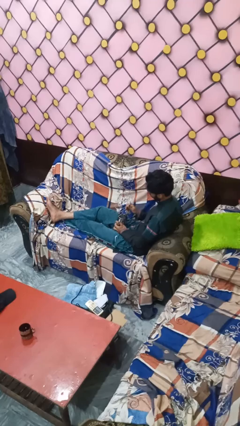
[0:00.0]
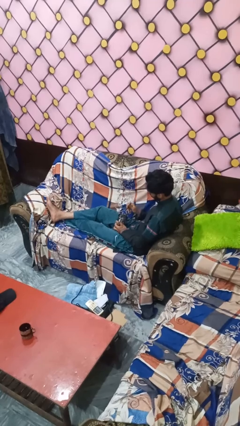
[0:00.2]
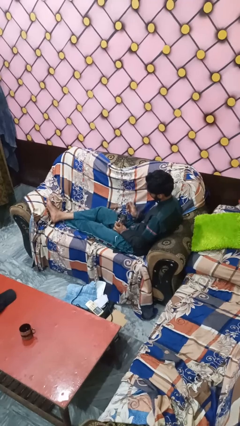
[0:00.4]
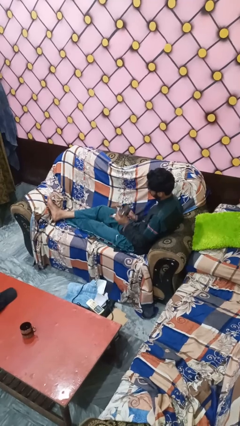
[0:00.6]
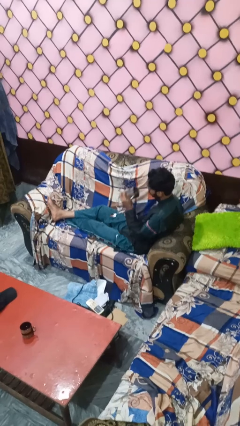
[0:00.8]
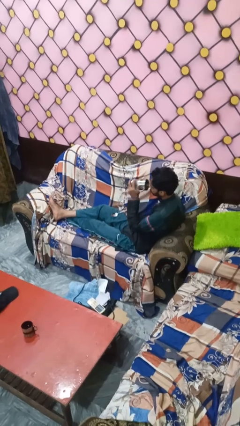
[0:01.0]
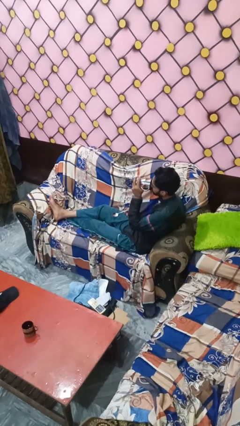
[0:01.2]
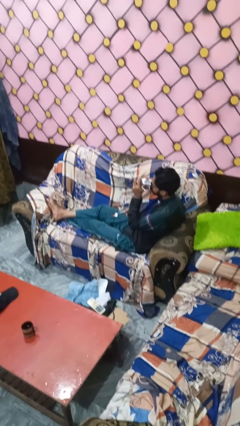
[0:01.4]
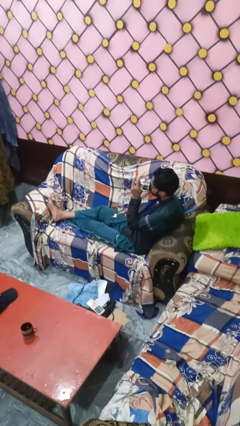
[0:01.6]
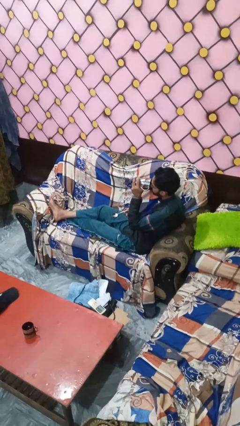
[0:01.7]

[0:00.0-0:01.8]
person drinks from mug

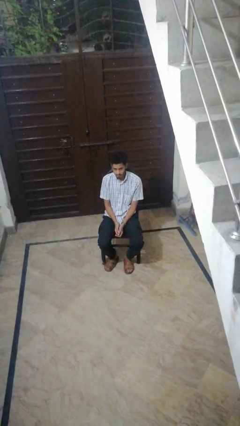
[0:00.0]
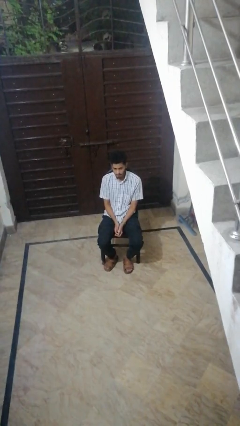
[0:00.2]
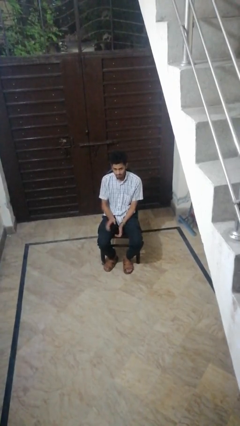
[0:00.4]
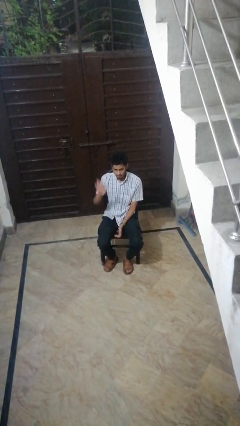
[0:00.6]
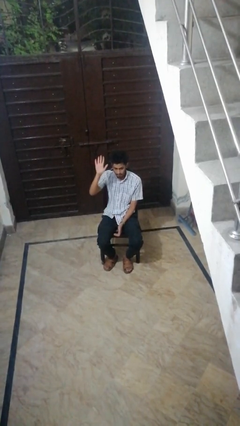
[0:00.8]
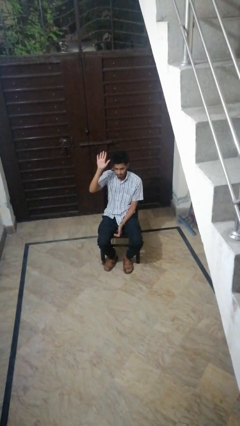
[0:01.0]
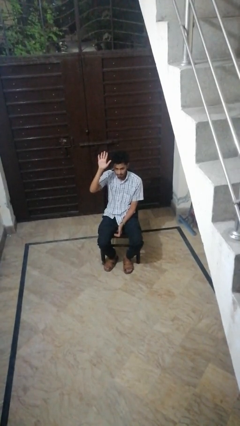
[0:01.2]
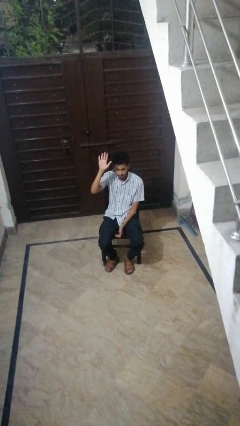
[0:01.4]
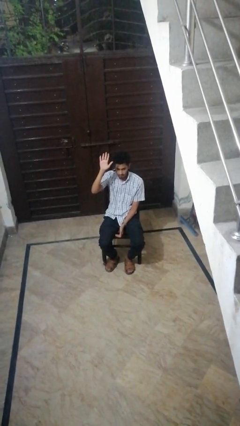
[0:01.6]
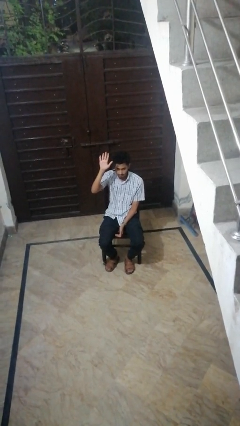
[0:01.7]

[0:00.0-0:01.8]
person gestures raise hand

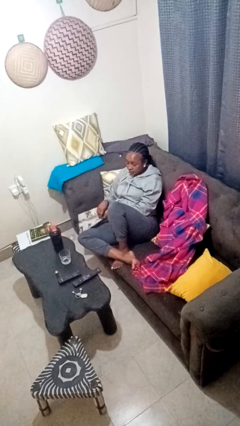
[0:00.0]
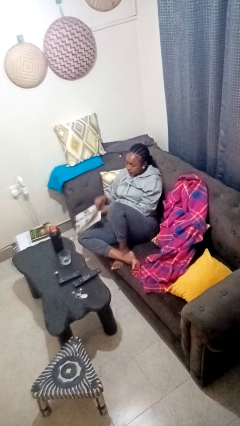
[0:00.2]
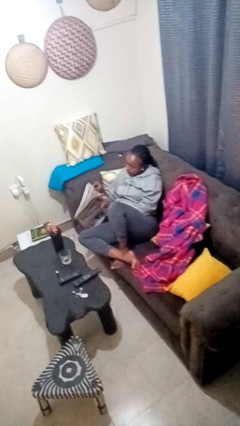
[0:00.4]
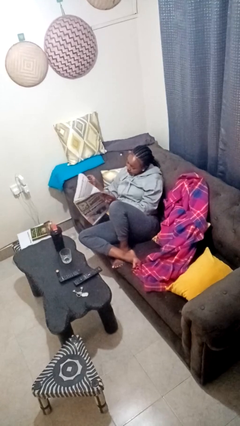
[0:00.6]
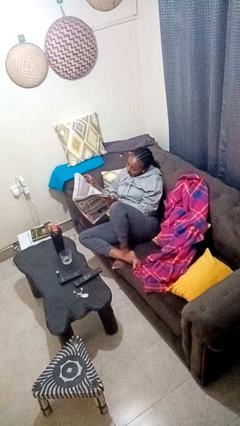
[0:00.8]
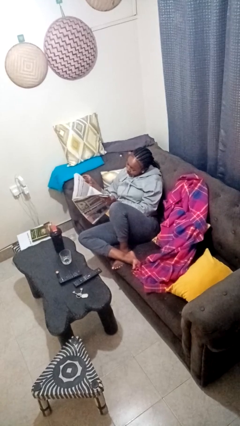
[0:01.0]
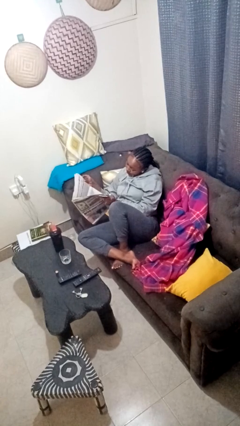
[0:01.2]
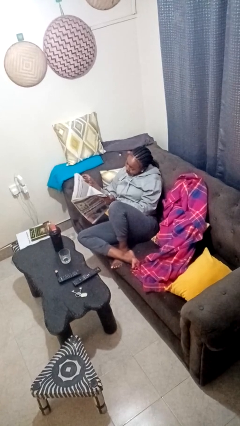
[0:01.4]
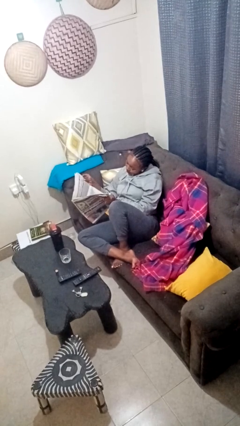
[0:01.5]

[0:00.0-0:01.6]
person reads newspaper

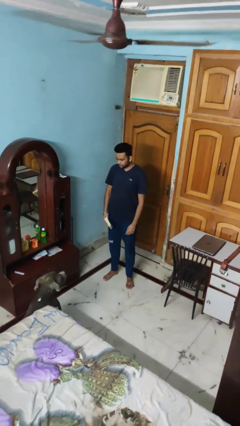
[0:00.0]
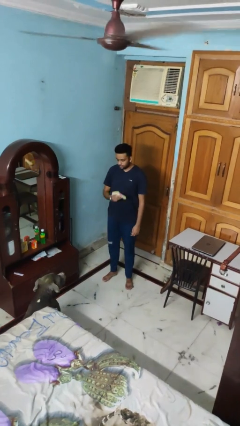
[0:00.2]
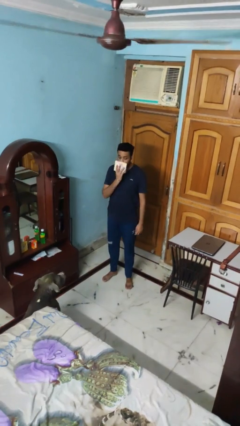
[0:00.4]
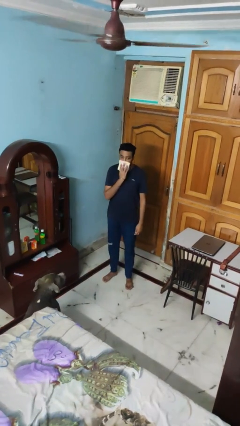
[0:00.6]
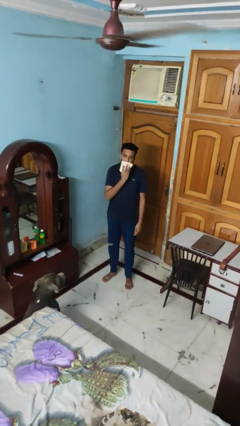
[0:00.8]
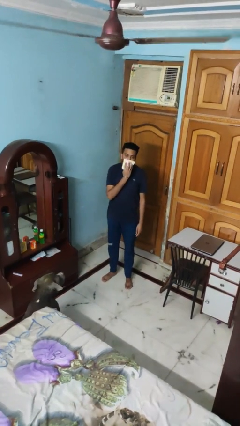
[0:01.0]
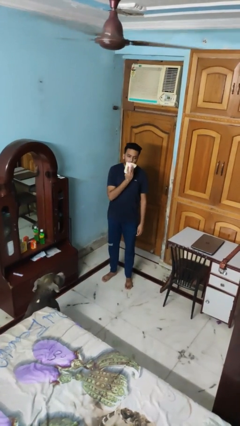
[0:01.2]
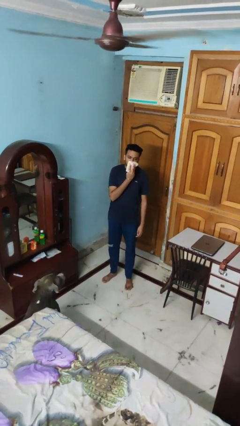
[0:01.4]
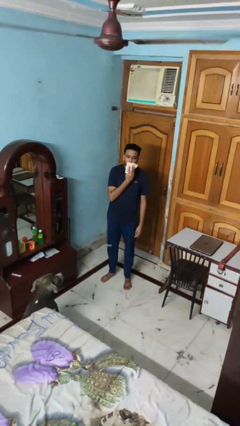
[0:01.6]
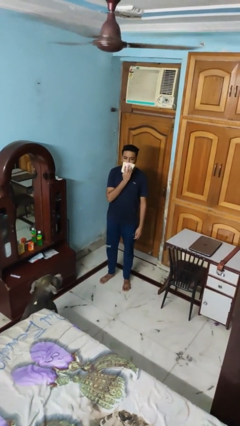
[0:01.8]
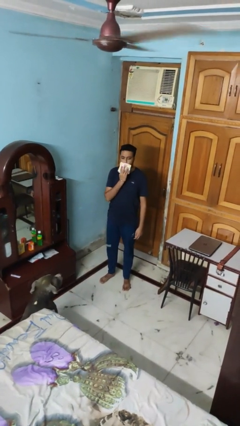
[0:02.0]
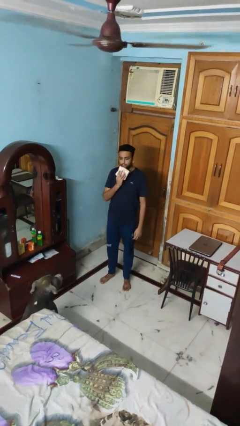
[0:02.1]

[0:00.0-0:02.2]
person wipes mouth with napkin

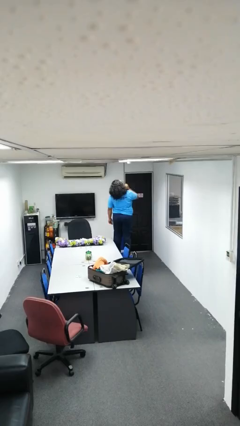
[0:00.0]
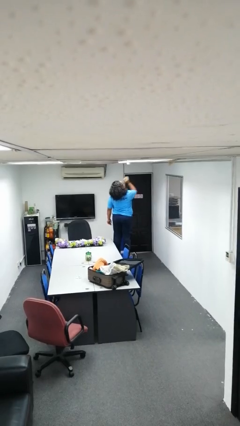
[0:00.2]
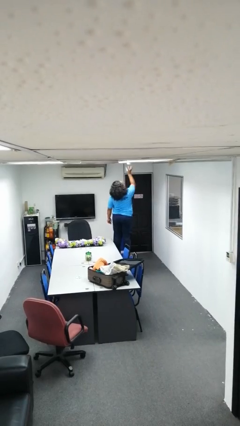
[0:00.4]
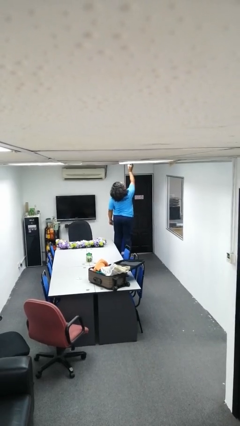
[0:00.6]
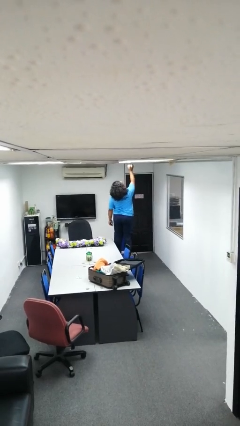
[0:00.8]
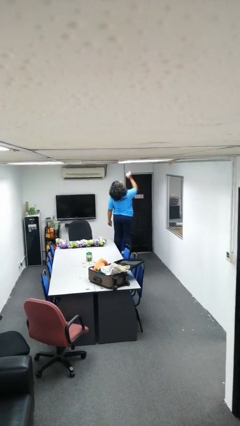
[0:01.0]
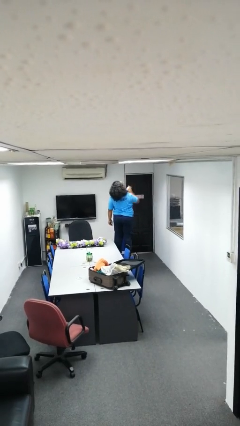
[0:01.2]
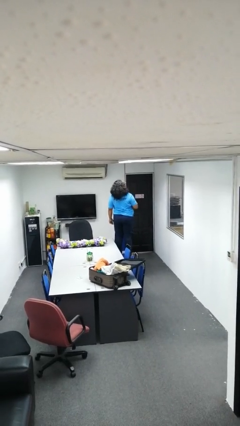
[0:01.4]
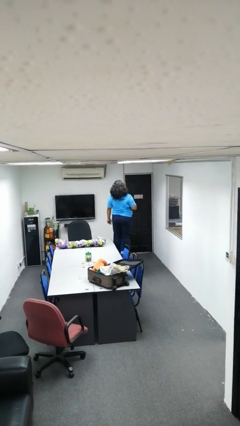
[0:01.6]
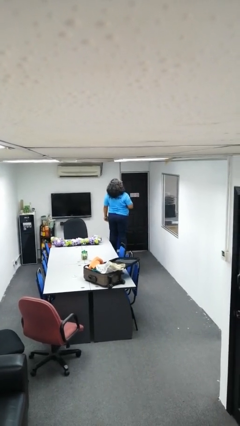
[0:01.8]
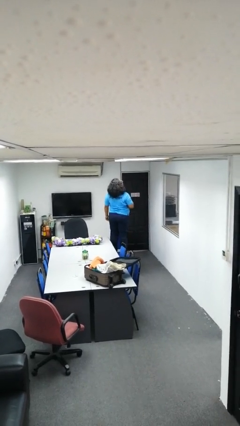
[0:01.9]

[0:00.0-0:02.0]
person takes down smoke detector

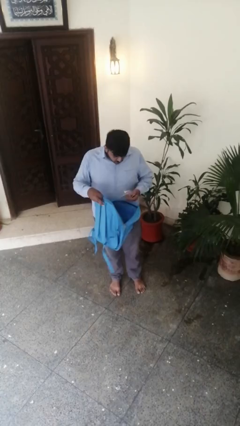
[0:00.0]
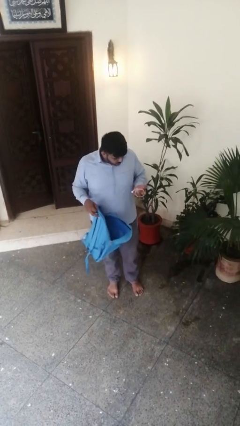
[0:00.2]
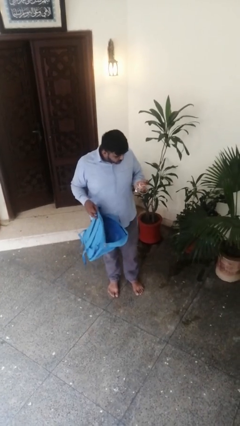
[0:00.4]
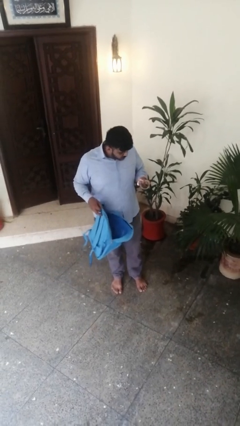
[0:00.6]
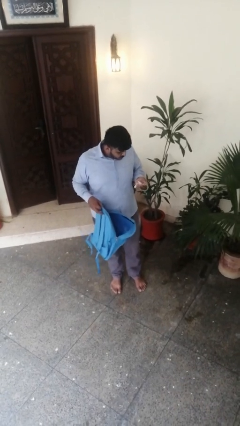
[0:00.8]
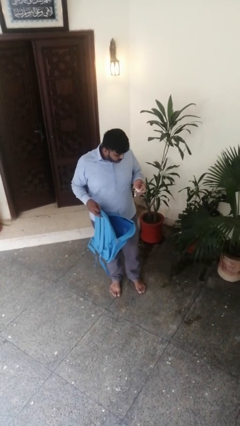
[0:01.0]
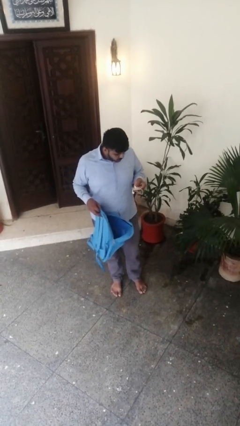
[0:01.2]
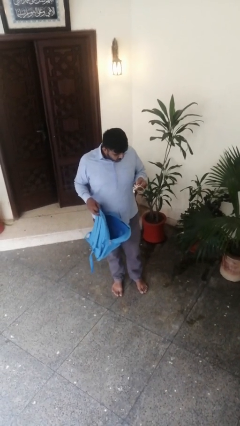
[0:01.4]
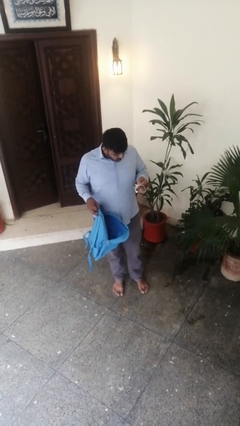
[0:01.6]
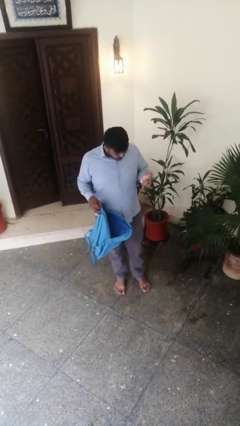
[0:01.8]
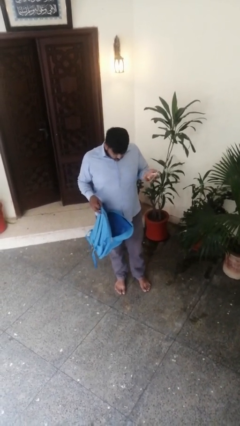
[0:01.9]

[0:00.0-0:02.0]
person takes object from backpack

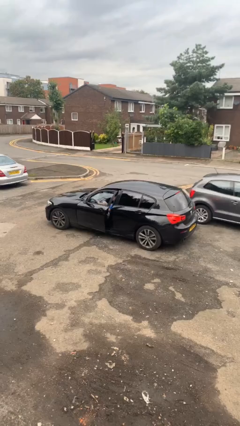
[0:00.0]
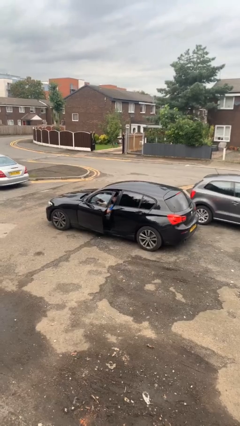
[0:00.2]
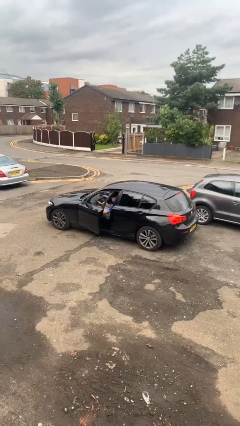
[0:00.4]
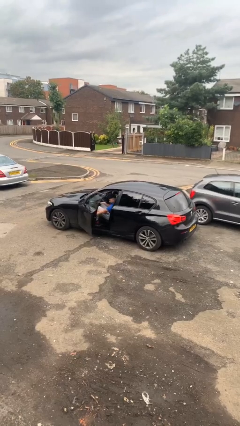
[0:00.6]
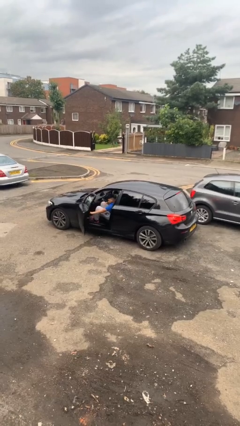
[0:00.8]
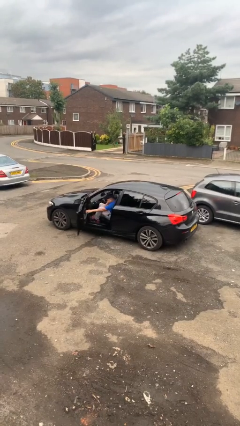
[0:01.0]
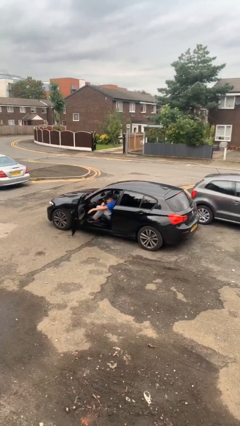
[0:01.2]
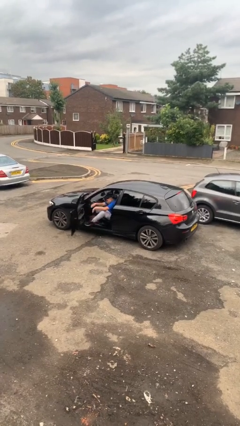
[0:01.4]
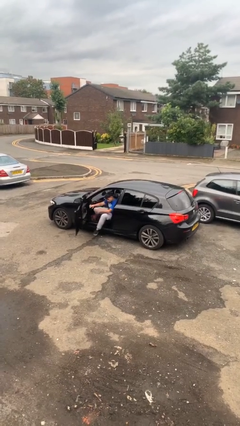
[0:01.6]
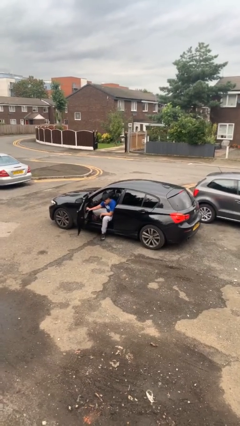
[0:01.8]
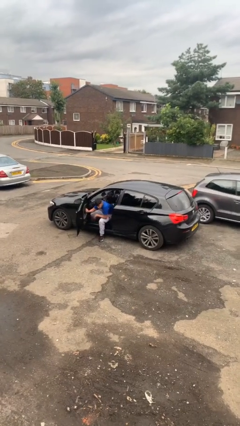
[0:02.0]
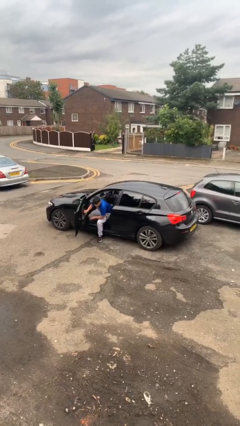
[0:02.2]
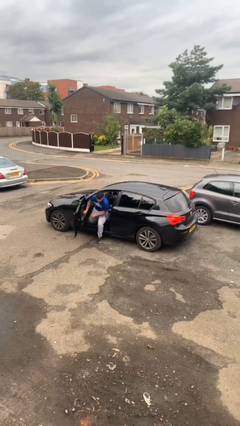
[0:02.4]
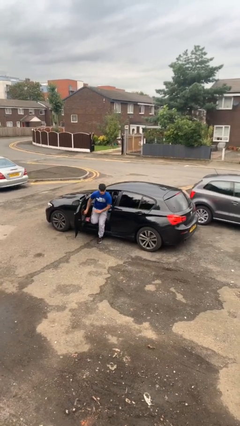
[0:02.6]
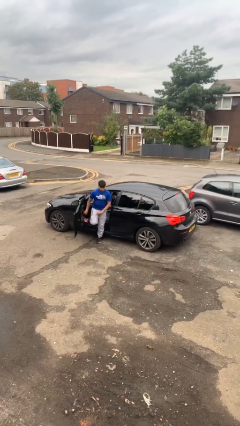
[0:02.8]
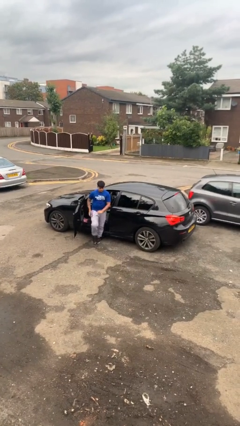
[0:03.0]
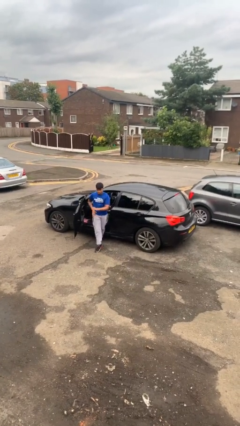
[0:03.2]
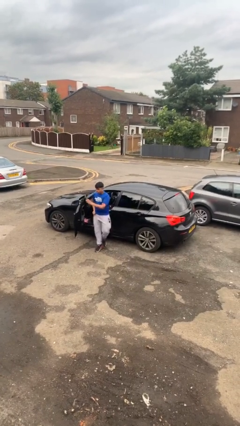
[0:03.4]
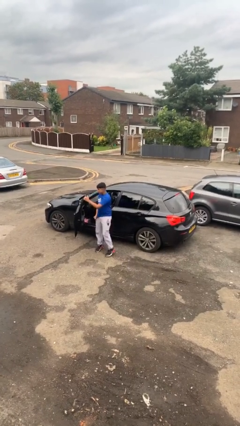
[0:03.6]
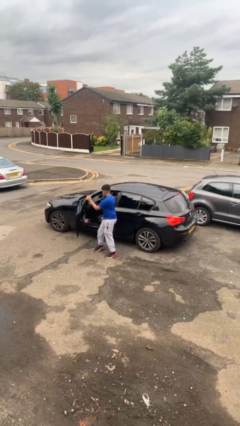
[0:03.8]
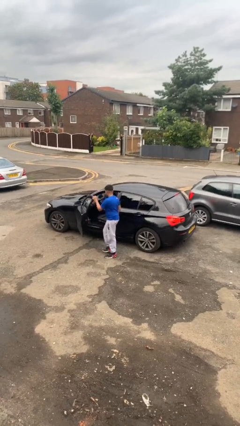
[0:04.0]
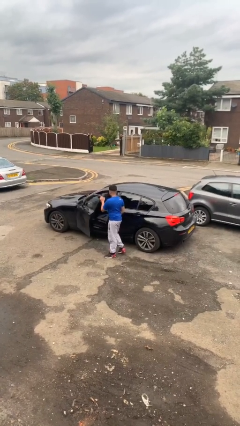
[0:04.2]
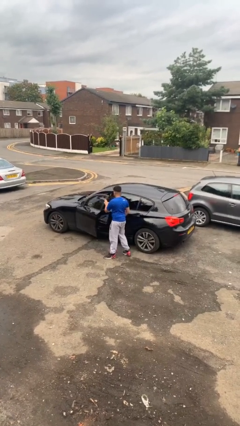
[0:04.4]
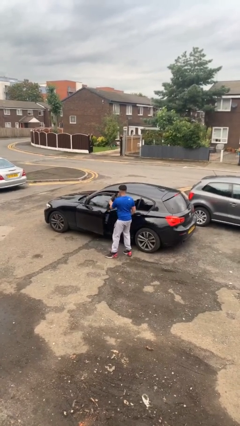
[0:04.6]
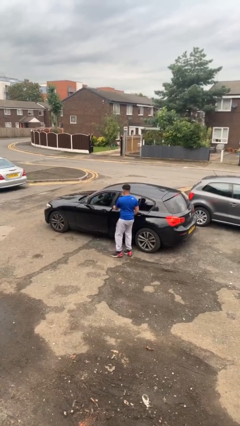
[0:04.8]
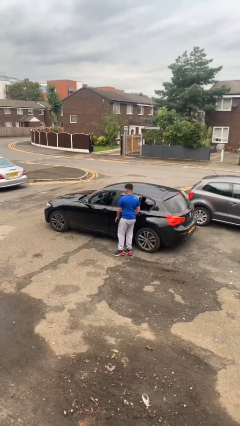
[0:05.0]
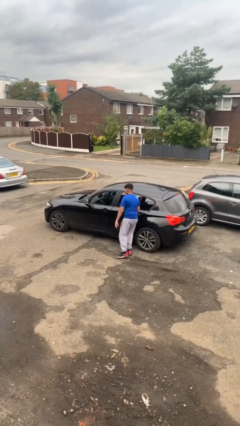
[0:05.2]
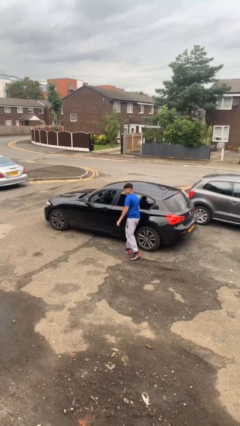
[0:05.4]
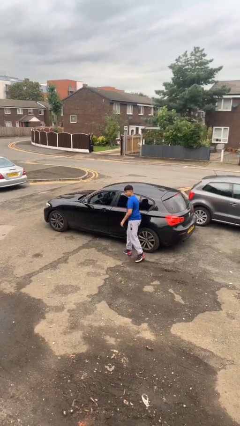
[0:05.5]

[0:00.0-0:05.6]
car drops off person

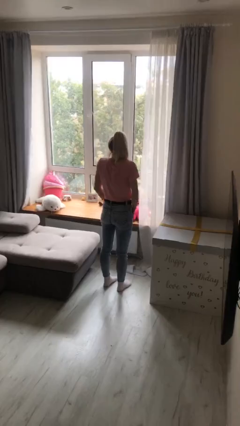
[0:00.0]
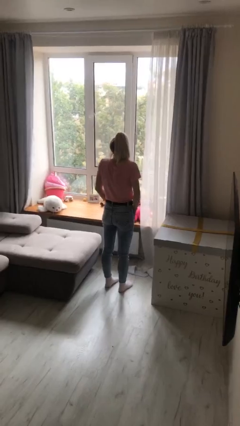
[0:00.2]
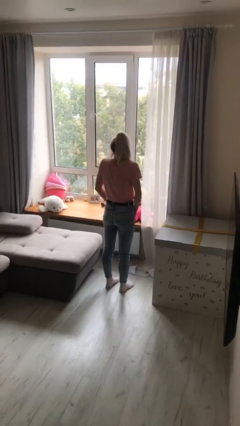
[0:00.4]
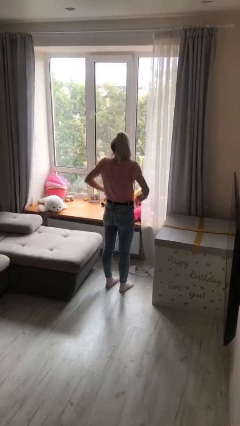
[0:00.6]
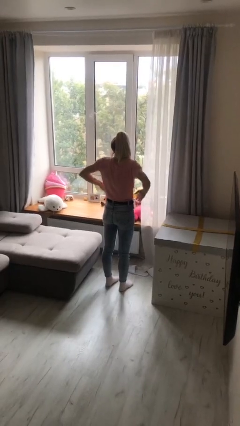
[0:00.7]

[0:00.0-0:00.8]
person puts hands in back pockets
